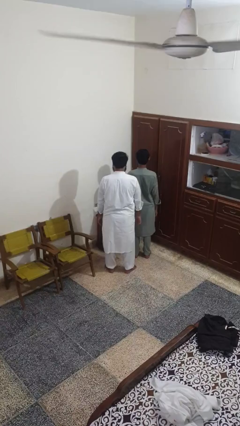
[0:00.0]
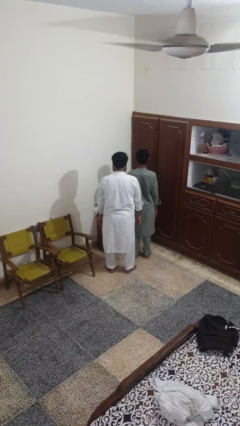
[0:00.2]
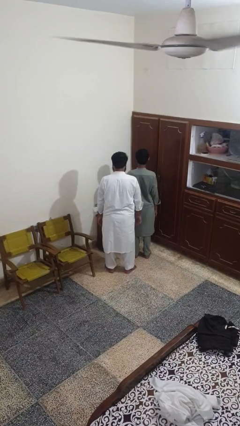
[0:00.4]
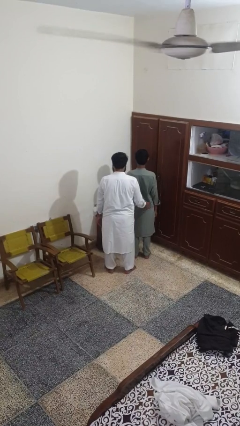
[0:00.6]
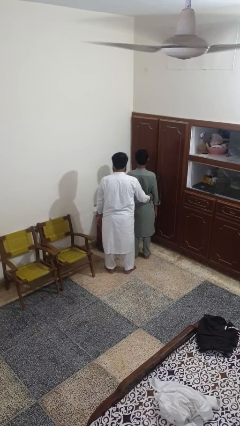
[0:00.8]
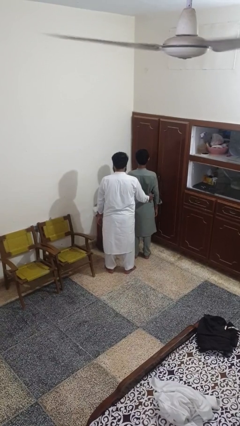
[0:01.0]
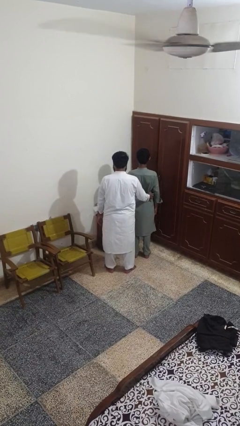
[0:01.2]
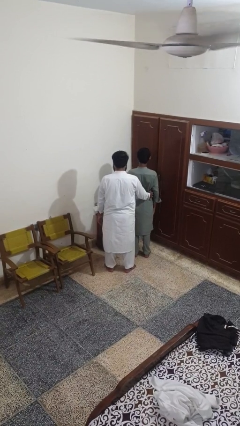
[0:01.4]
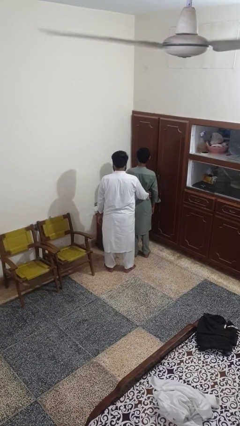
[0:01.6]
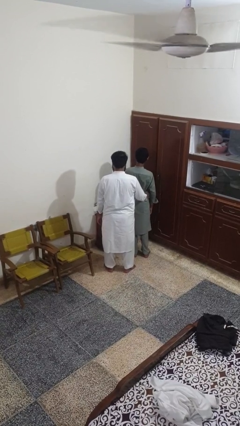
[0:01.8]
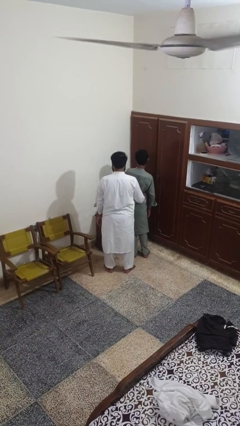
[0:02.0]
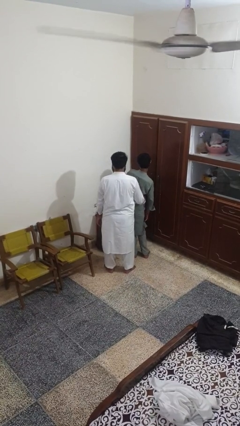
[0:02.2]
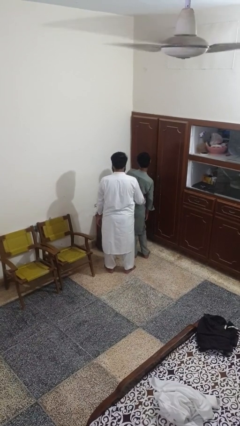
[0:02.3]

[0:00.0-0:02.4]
person tickles person

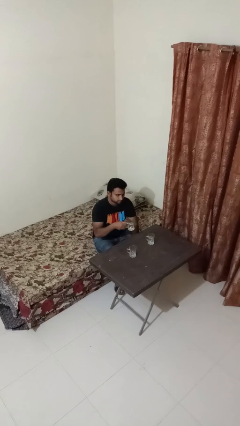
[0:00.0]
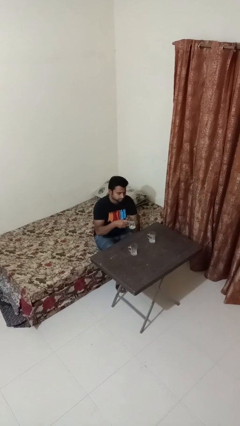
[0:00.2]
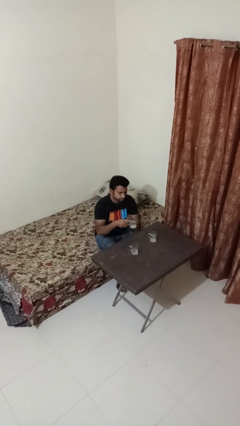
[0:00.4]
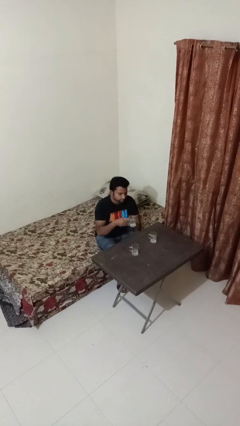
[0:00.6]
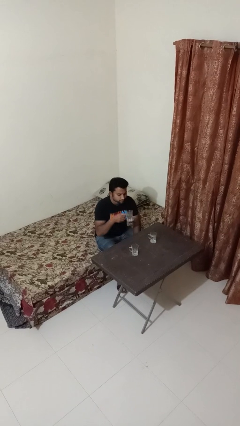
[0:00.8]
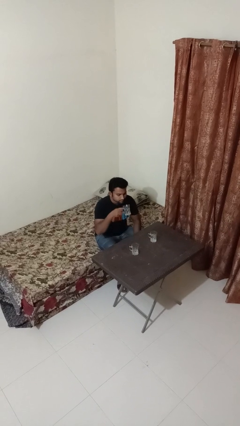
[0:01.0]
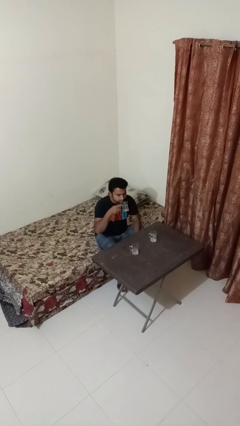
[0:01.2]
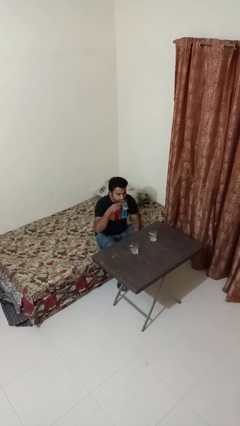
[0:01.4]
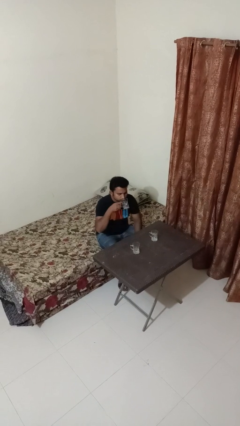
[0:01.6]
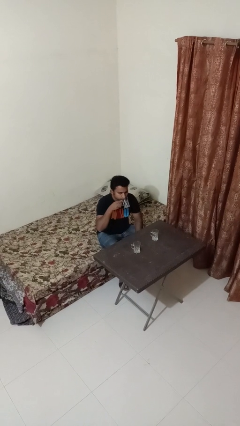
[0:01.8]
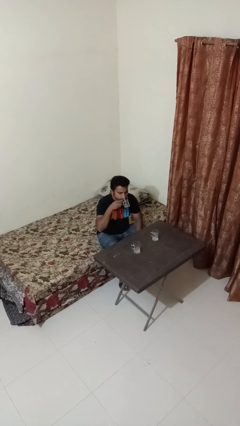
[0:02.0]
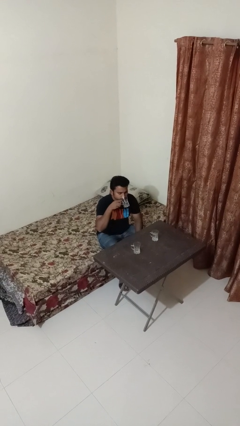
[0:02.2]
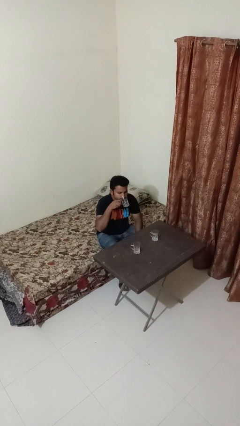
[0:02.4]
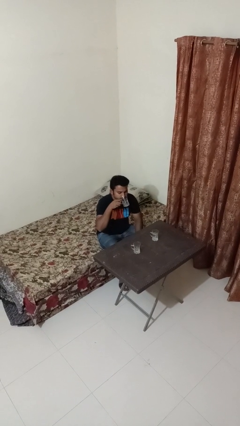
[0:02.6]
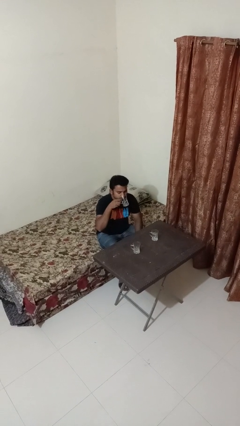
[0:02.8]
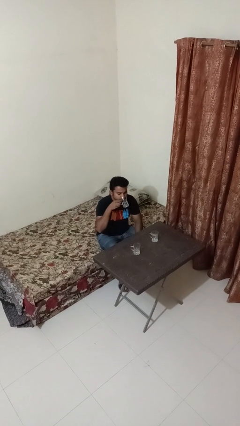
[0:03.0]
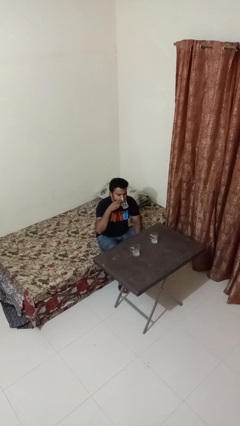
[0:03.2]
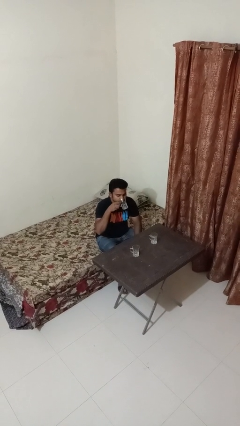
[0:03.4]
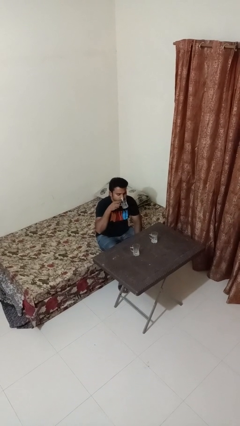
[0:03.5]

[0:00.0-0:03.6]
person drinks from shotglass

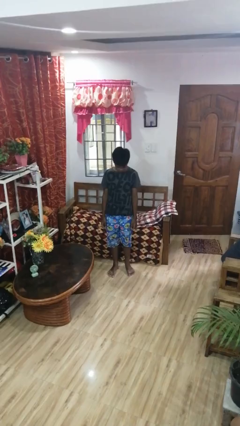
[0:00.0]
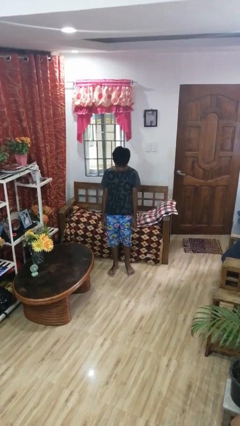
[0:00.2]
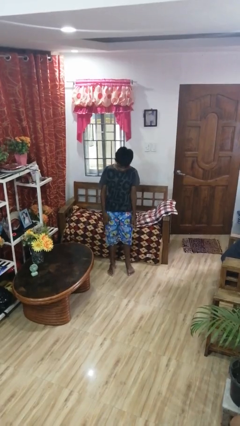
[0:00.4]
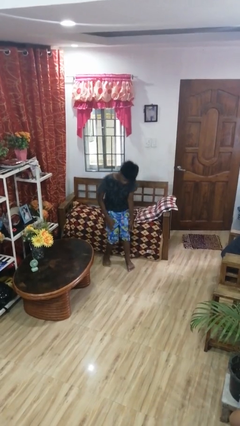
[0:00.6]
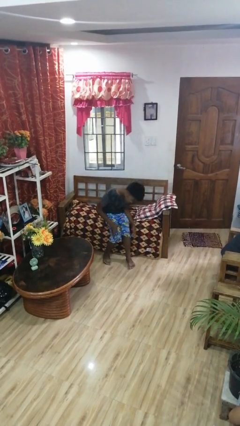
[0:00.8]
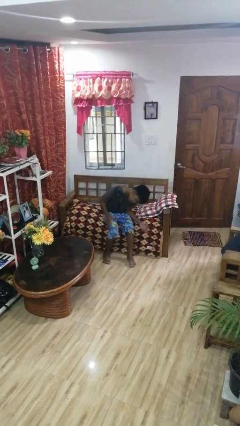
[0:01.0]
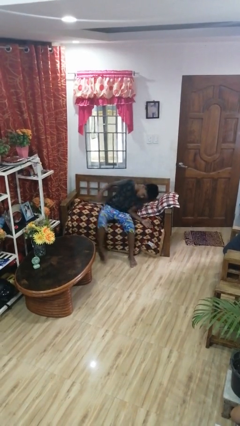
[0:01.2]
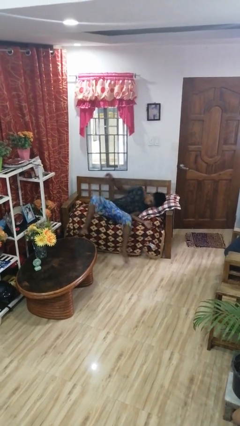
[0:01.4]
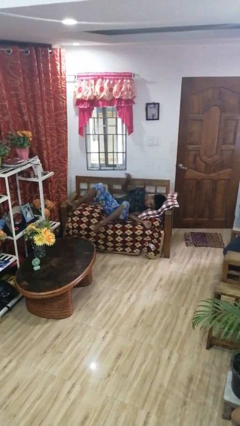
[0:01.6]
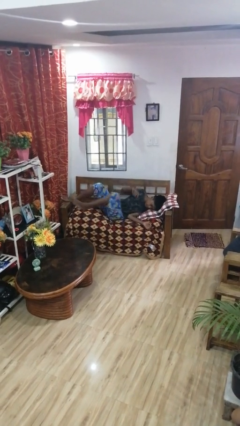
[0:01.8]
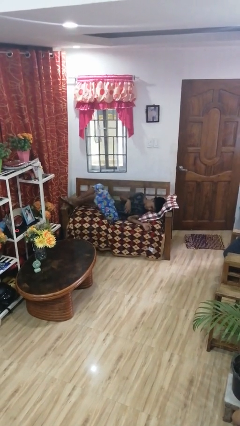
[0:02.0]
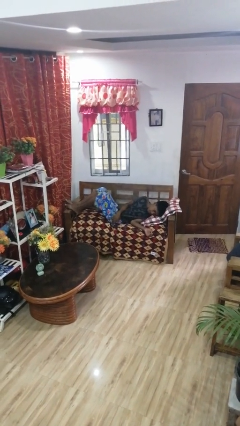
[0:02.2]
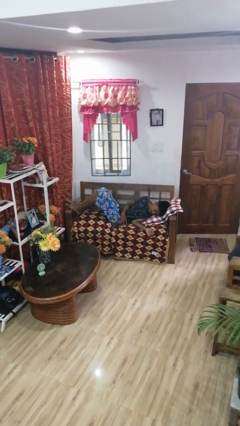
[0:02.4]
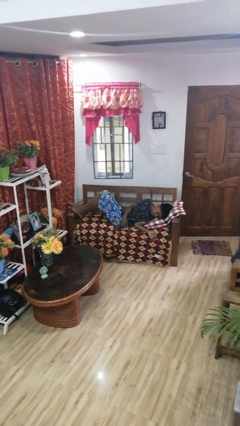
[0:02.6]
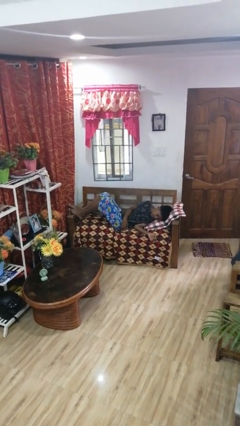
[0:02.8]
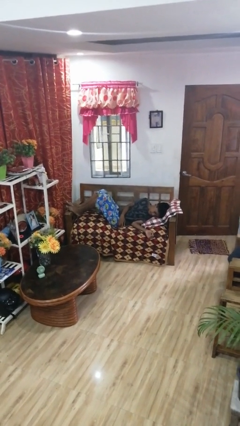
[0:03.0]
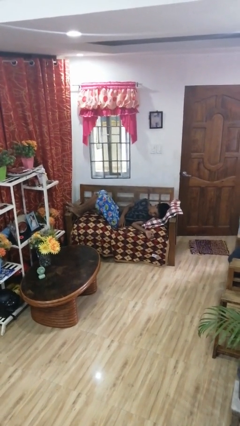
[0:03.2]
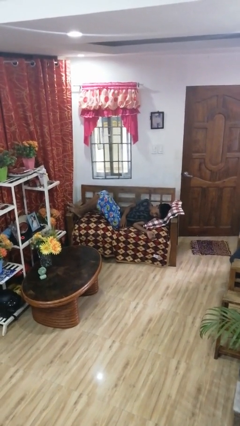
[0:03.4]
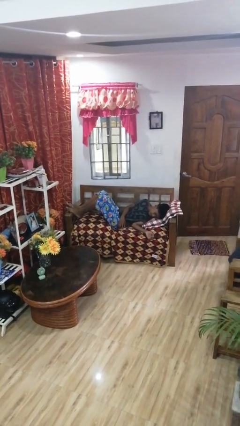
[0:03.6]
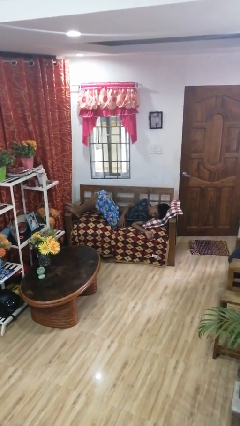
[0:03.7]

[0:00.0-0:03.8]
person lies down on couch

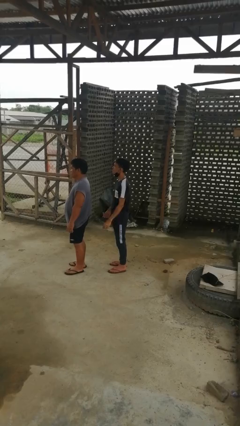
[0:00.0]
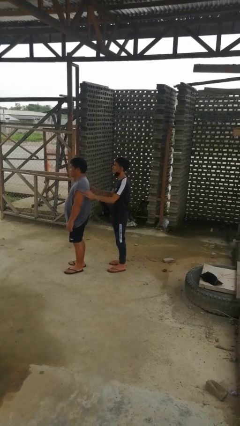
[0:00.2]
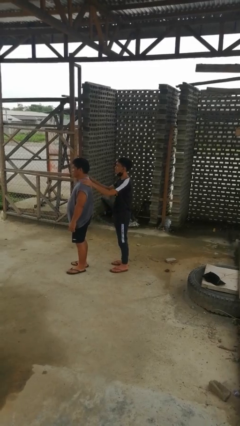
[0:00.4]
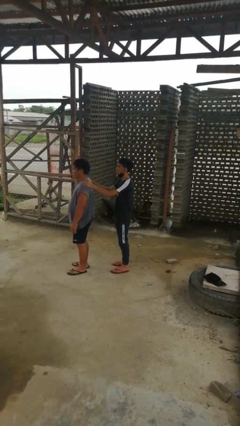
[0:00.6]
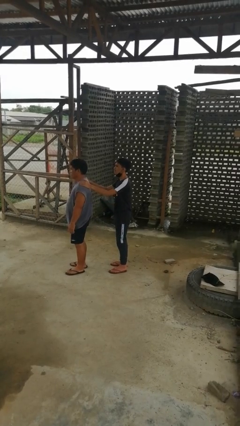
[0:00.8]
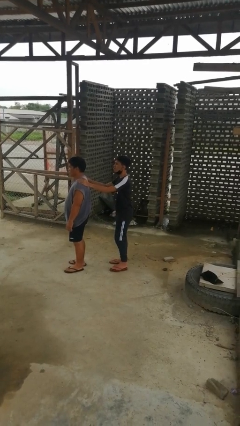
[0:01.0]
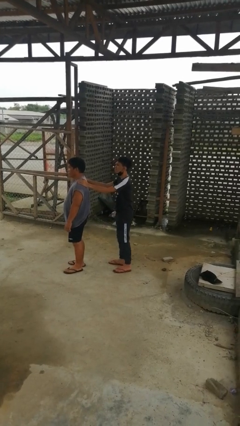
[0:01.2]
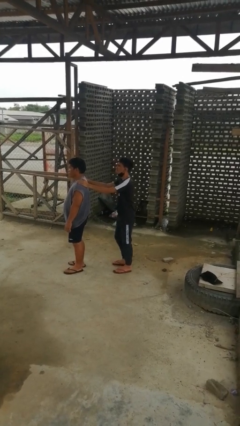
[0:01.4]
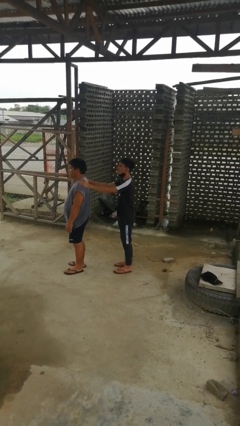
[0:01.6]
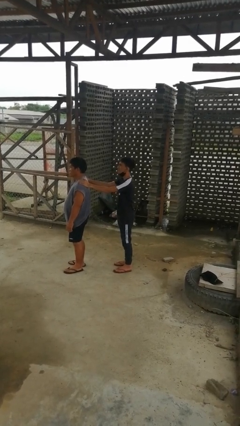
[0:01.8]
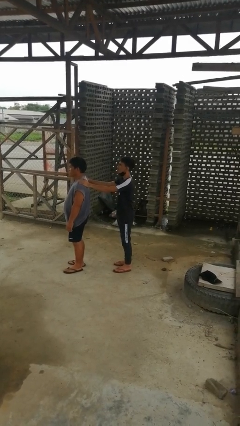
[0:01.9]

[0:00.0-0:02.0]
person grabs person by shoulder

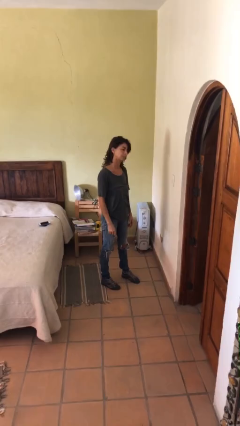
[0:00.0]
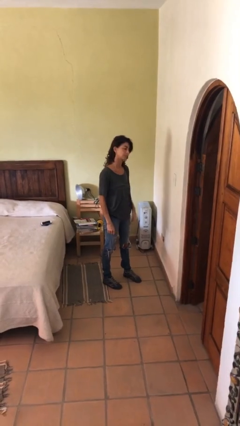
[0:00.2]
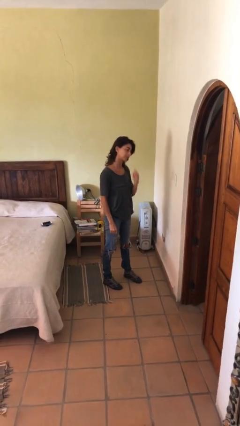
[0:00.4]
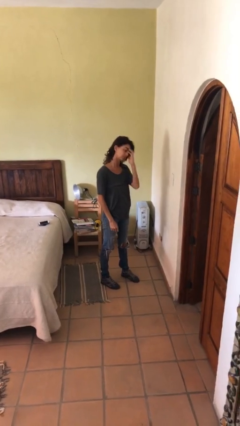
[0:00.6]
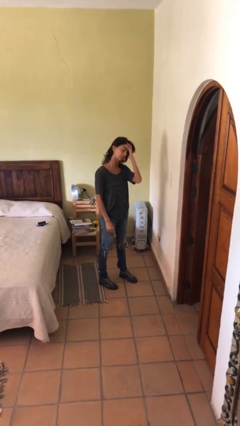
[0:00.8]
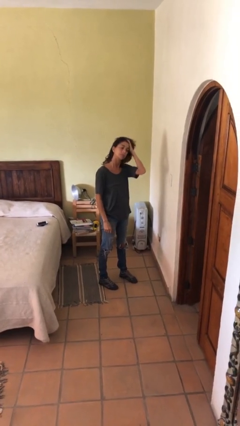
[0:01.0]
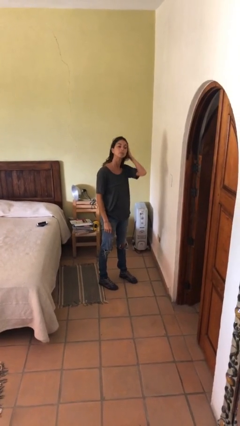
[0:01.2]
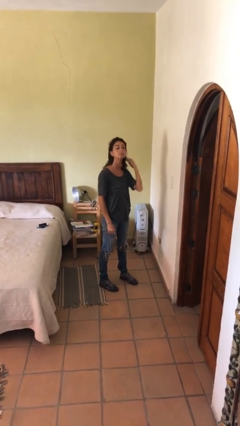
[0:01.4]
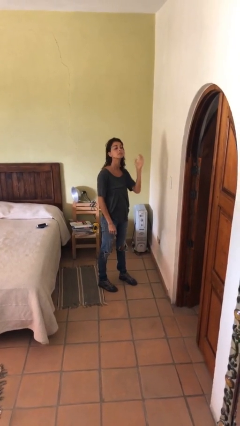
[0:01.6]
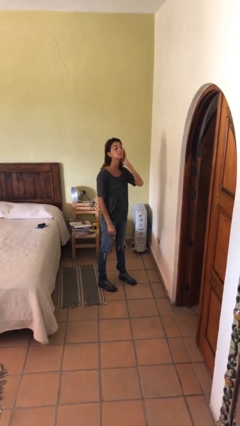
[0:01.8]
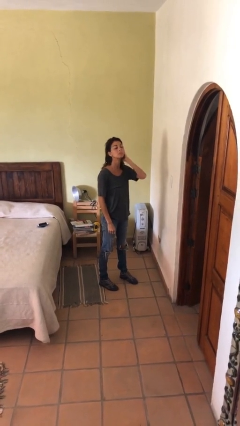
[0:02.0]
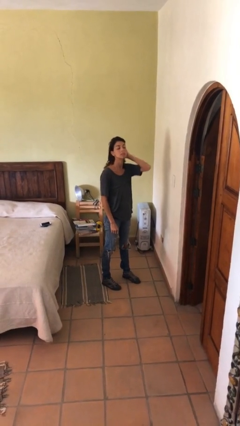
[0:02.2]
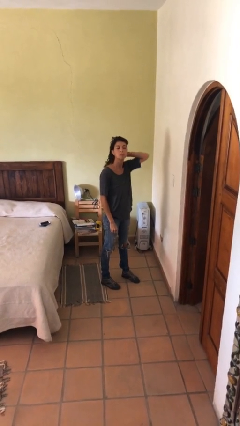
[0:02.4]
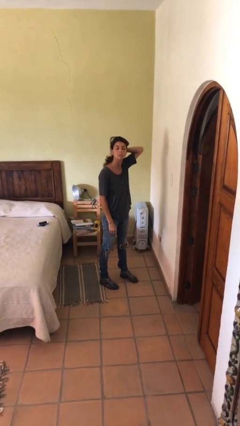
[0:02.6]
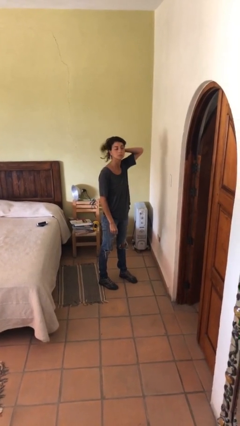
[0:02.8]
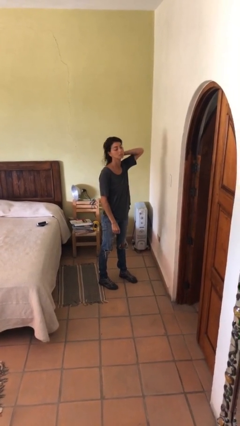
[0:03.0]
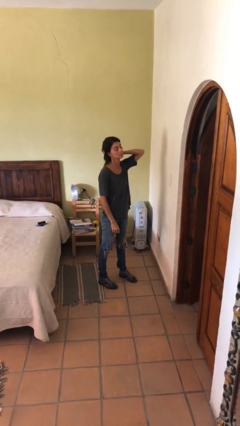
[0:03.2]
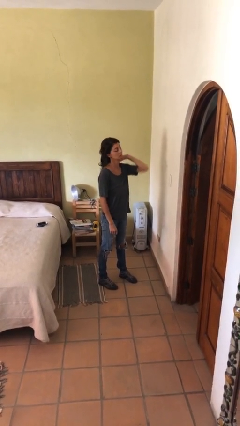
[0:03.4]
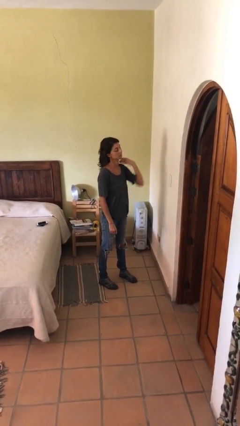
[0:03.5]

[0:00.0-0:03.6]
person strokes hair

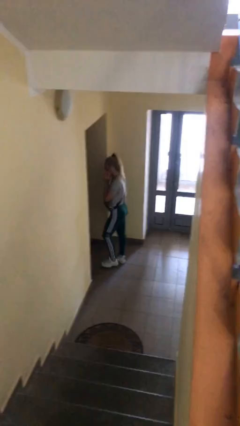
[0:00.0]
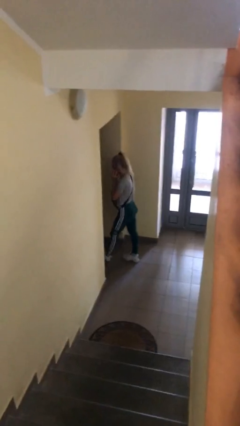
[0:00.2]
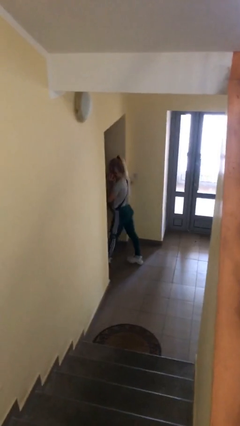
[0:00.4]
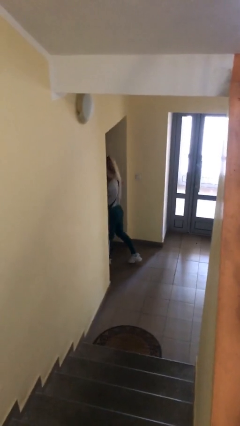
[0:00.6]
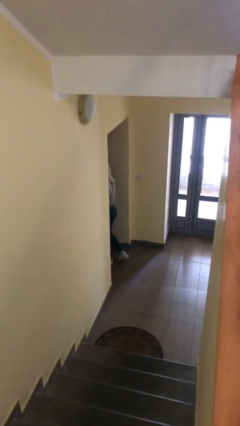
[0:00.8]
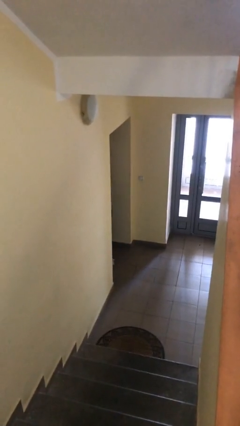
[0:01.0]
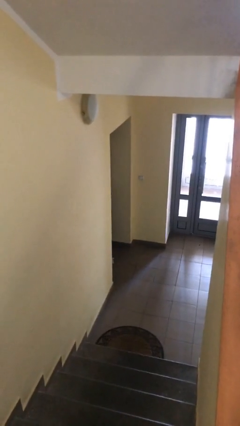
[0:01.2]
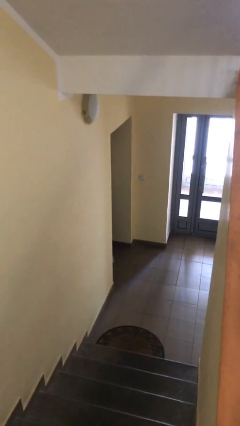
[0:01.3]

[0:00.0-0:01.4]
person exits scene through structure

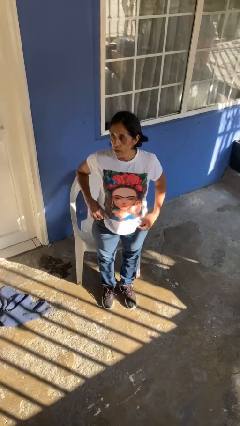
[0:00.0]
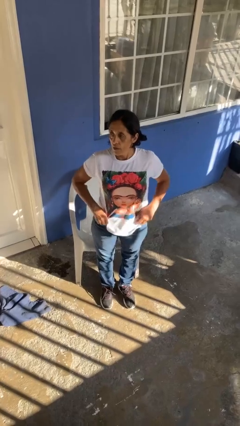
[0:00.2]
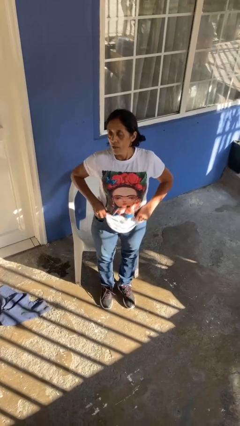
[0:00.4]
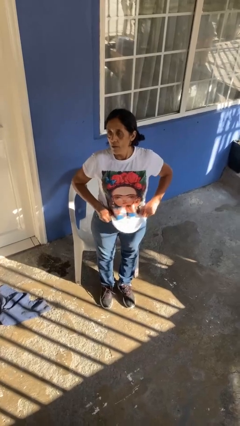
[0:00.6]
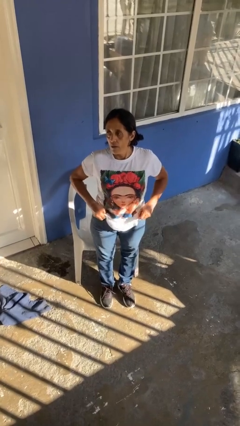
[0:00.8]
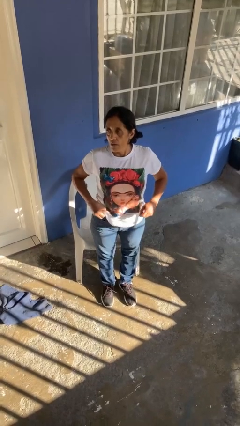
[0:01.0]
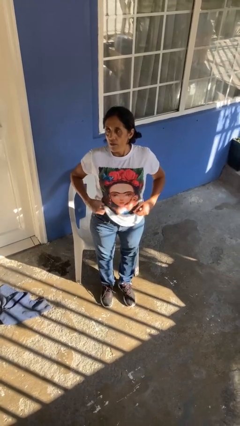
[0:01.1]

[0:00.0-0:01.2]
person hikes up pants
